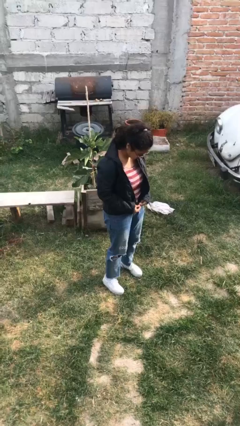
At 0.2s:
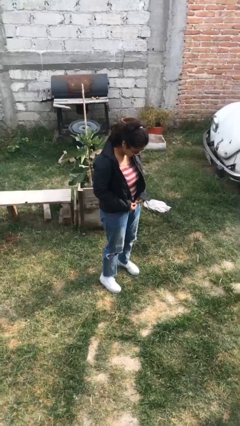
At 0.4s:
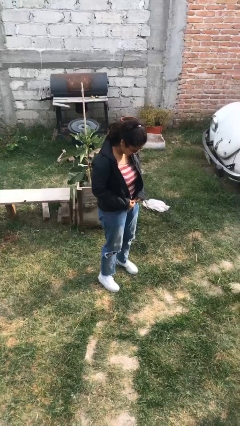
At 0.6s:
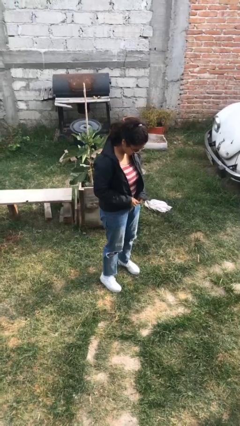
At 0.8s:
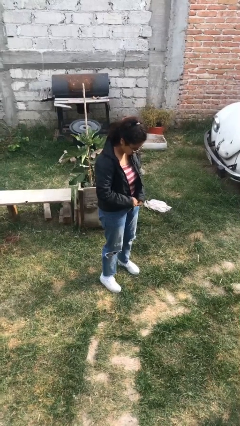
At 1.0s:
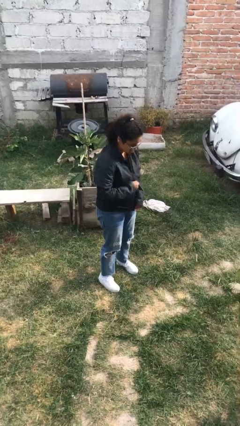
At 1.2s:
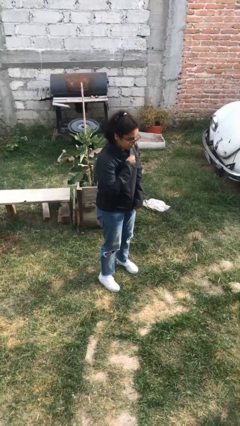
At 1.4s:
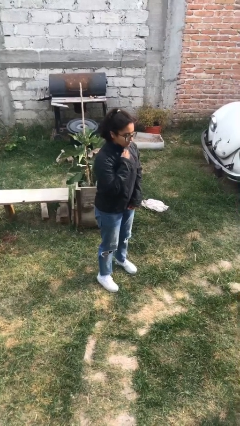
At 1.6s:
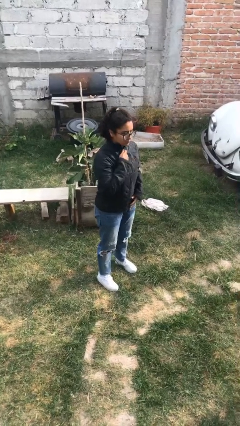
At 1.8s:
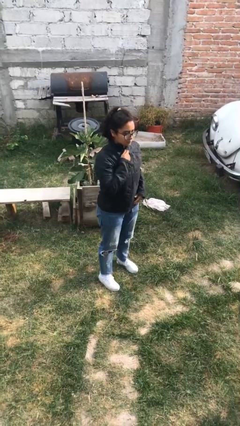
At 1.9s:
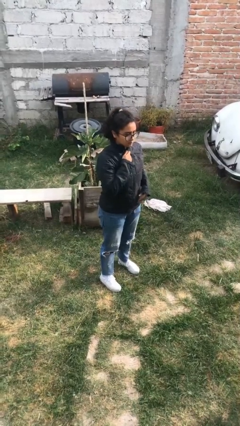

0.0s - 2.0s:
person zips up jacket

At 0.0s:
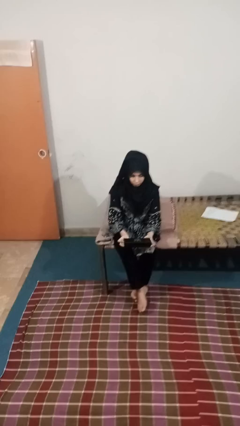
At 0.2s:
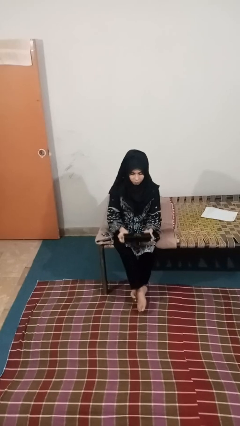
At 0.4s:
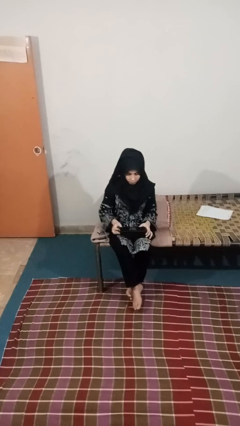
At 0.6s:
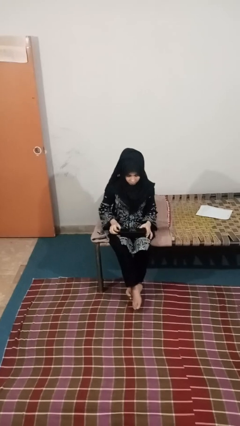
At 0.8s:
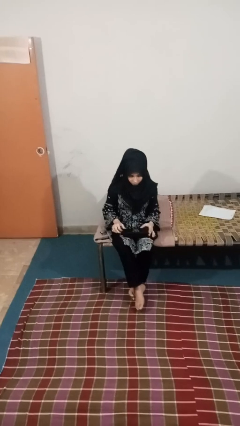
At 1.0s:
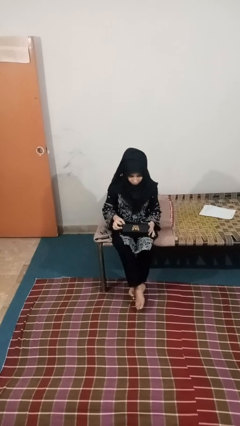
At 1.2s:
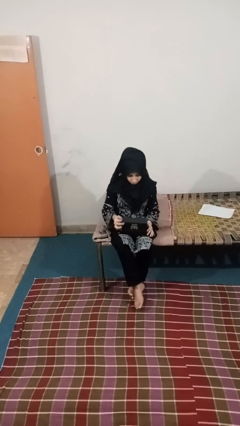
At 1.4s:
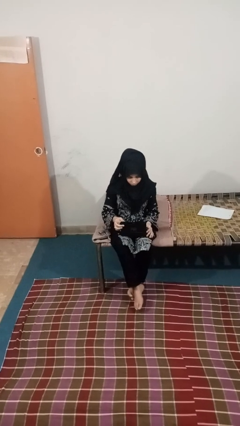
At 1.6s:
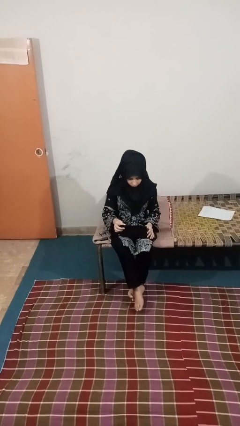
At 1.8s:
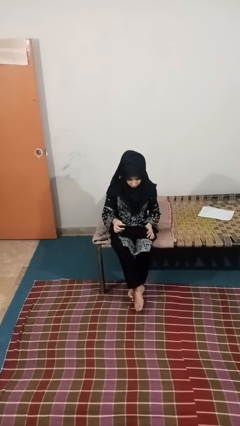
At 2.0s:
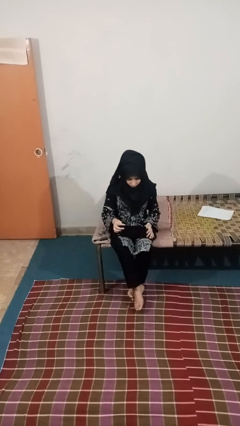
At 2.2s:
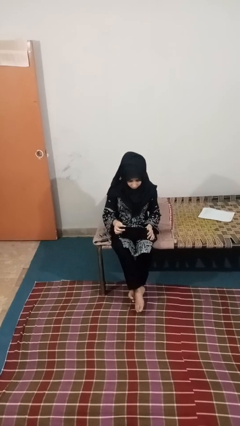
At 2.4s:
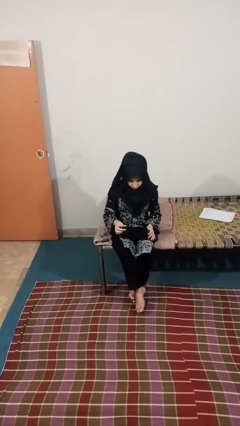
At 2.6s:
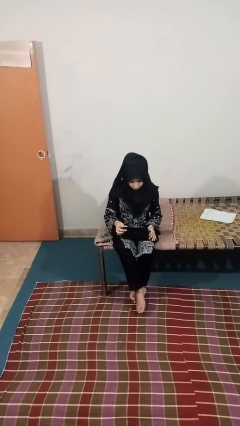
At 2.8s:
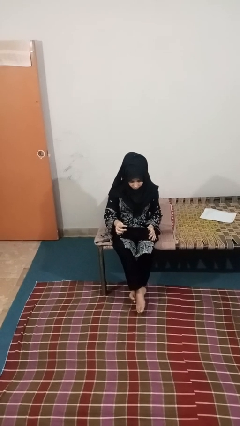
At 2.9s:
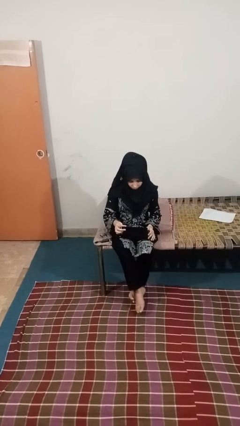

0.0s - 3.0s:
person opens jewelry box

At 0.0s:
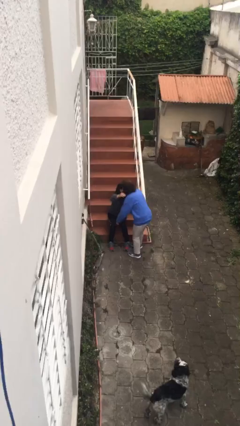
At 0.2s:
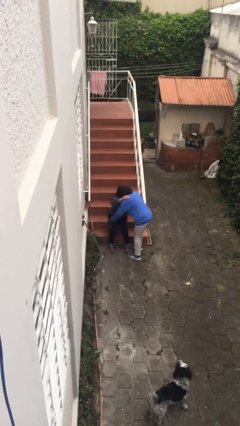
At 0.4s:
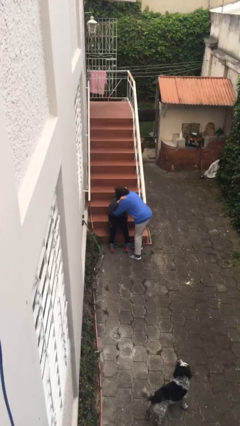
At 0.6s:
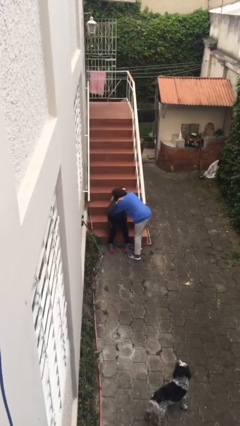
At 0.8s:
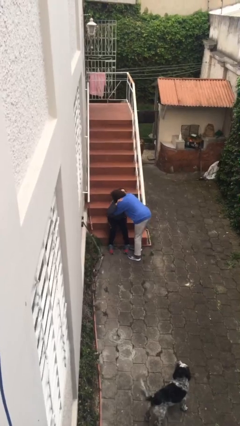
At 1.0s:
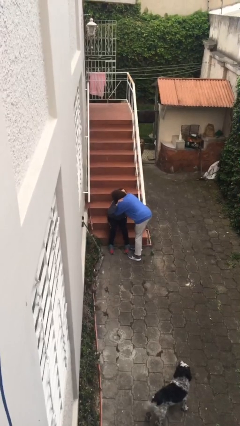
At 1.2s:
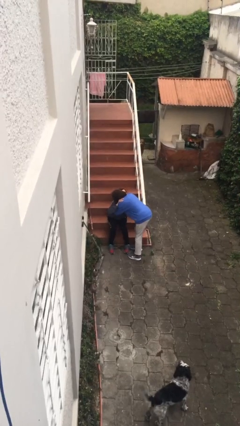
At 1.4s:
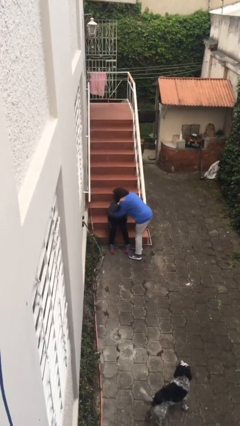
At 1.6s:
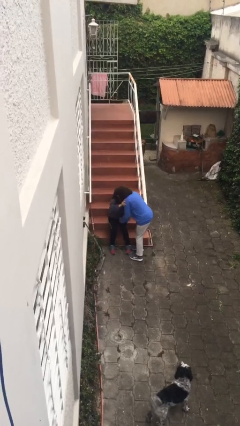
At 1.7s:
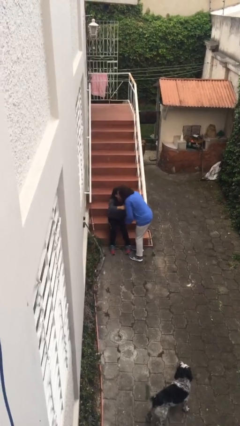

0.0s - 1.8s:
person embraces person

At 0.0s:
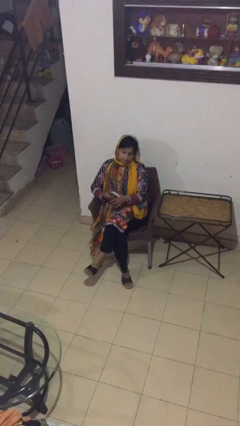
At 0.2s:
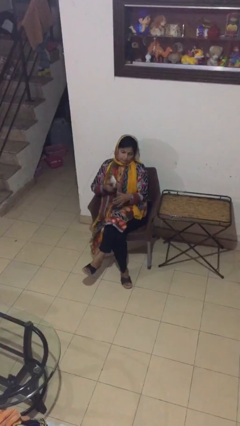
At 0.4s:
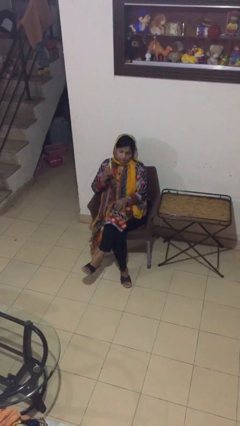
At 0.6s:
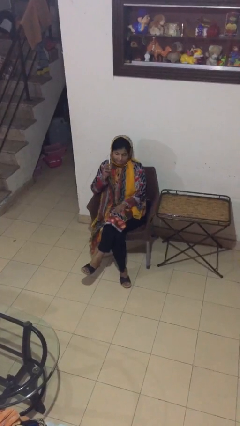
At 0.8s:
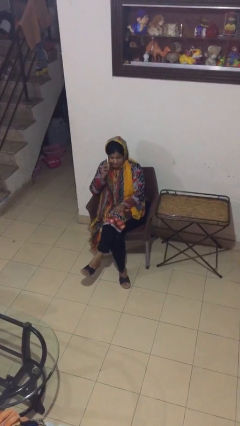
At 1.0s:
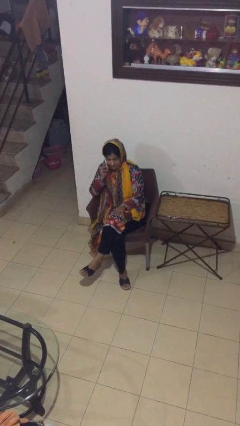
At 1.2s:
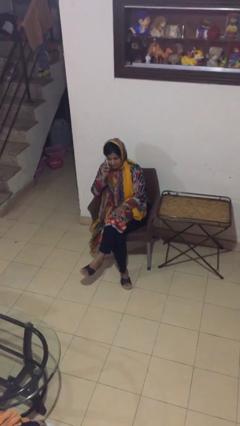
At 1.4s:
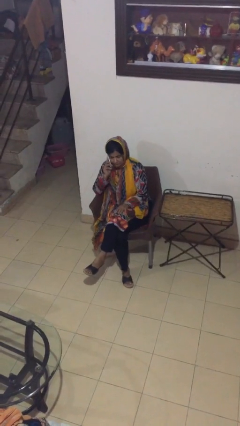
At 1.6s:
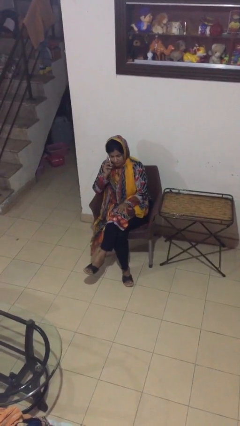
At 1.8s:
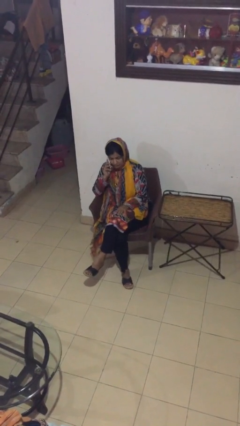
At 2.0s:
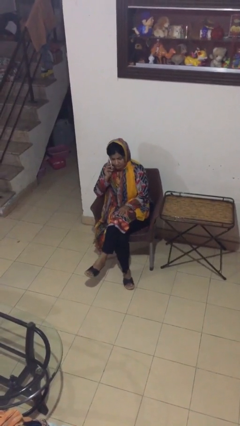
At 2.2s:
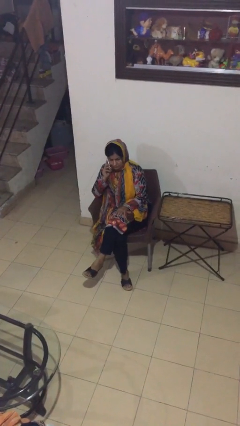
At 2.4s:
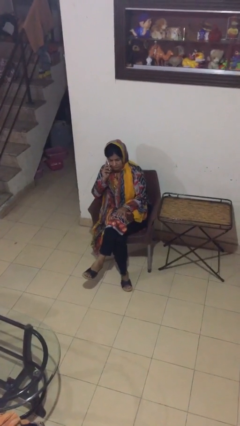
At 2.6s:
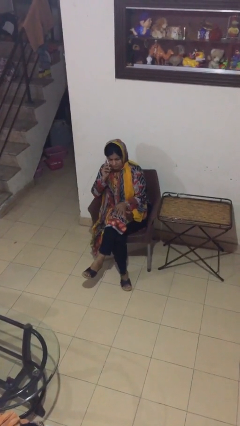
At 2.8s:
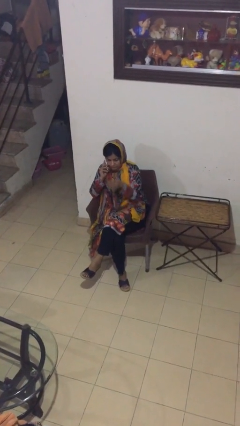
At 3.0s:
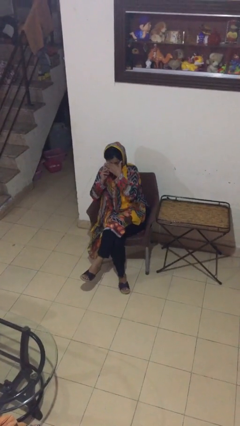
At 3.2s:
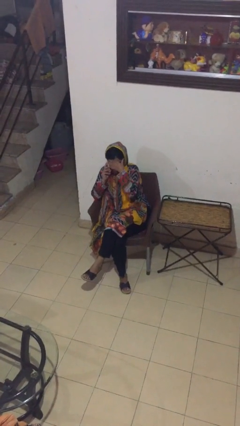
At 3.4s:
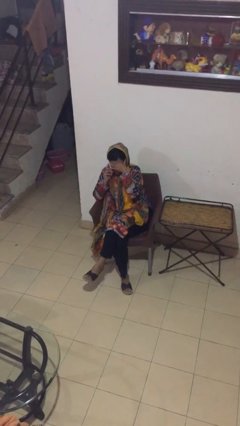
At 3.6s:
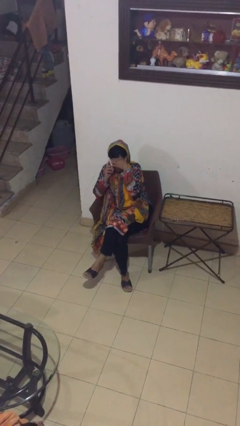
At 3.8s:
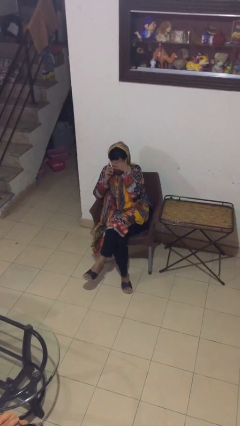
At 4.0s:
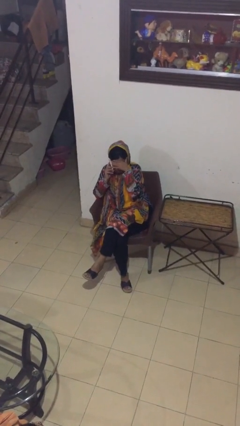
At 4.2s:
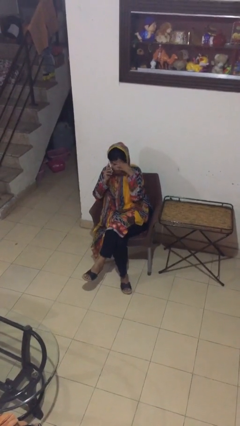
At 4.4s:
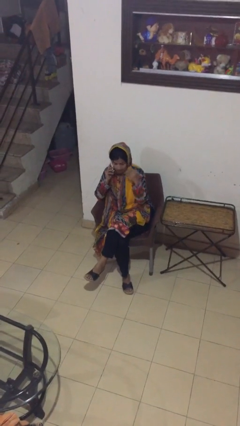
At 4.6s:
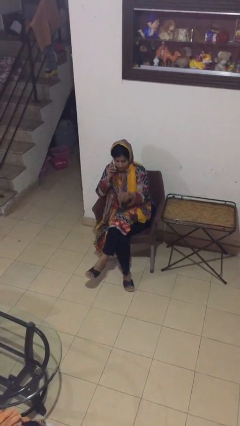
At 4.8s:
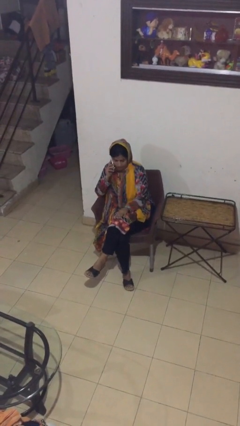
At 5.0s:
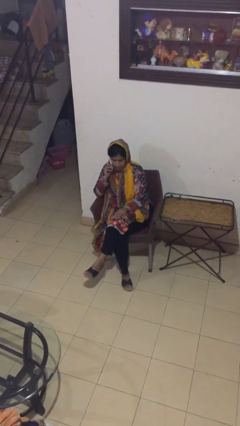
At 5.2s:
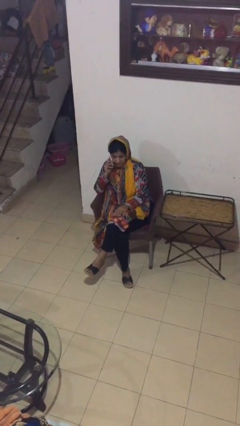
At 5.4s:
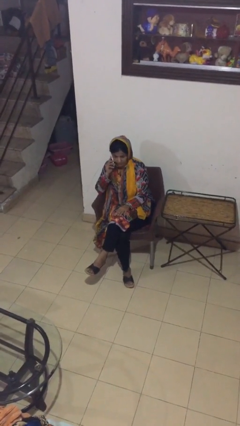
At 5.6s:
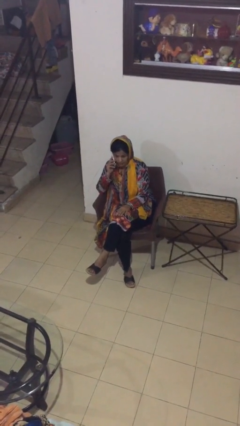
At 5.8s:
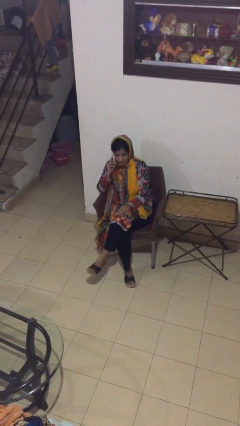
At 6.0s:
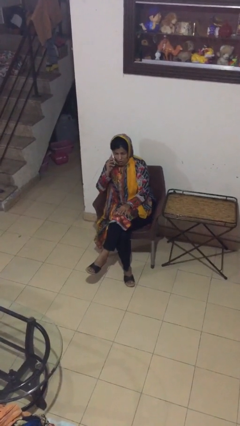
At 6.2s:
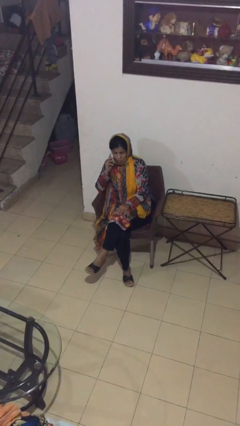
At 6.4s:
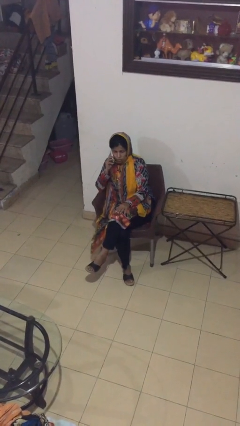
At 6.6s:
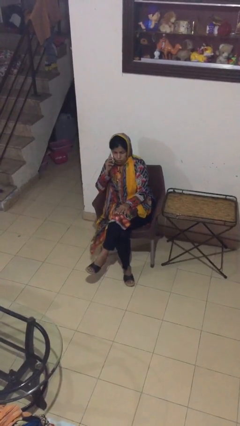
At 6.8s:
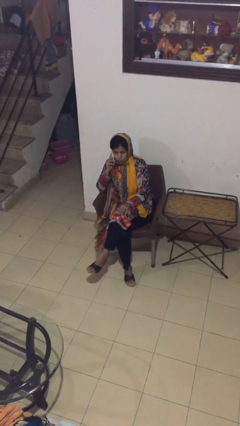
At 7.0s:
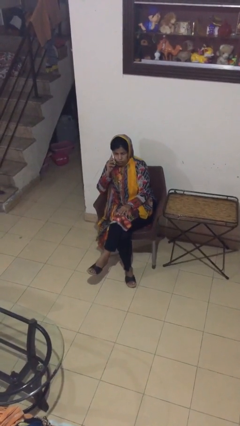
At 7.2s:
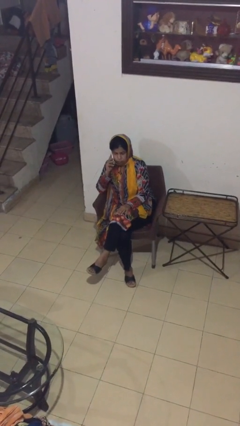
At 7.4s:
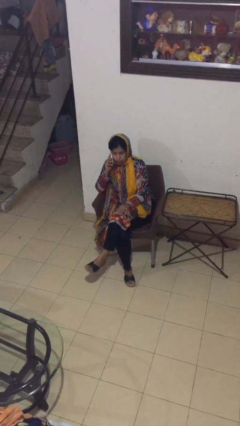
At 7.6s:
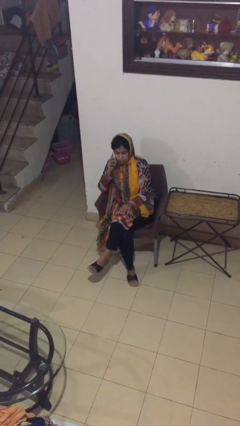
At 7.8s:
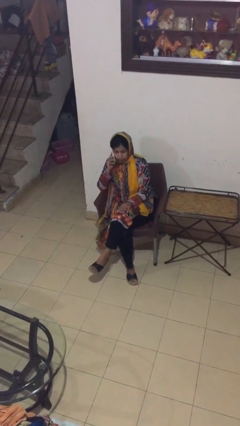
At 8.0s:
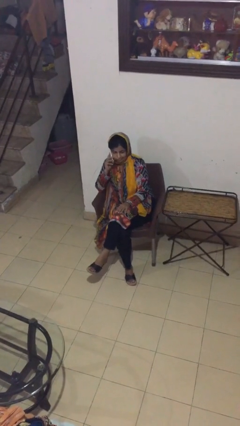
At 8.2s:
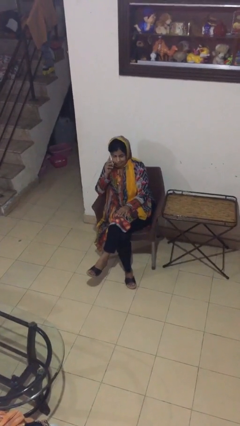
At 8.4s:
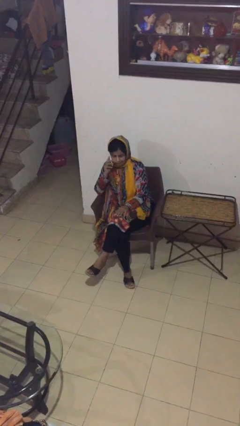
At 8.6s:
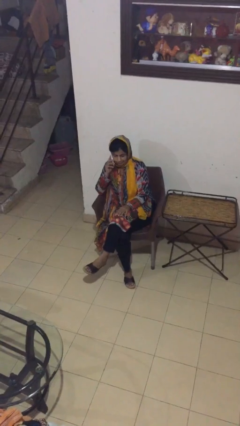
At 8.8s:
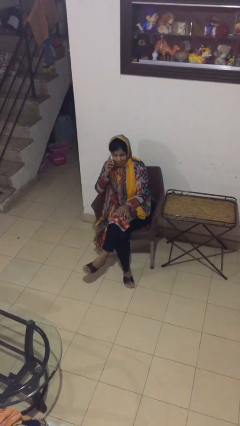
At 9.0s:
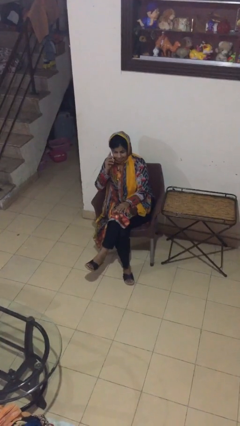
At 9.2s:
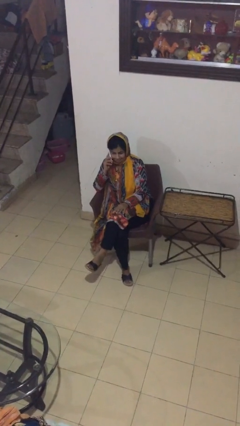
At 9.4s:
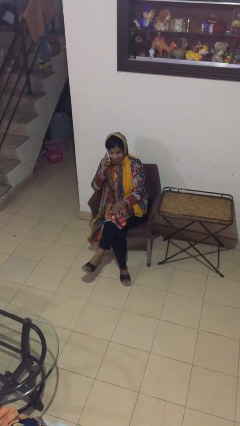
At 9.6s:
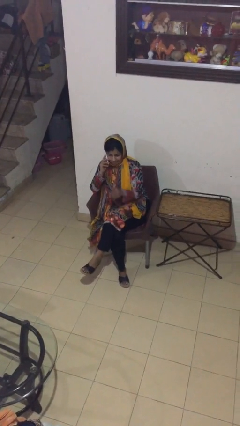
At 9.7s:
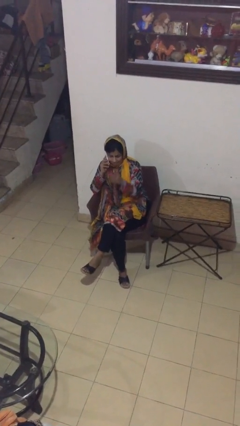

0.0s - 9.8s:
person talks on phone

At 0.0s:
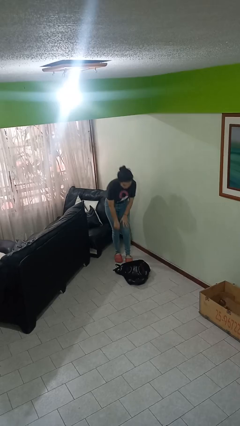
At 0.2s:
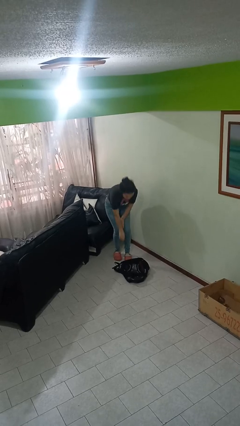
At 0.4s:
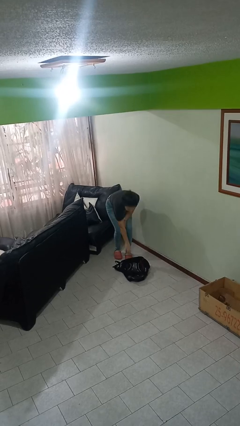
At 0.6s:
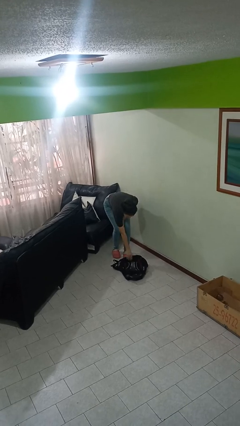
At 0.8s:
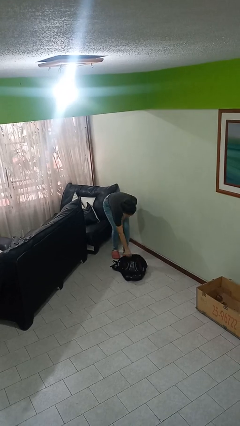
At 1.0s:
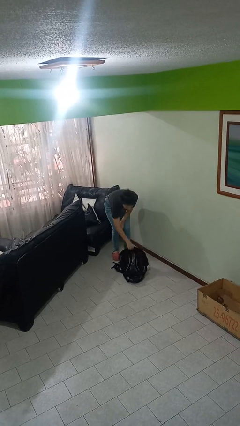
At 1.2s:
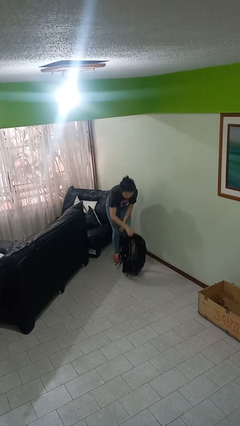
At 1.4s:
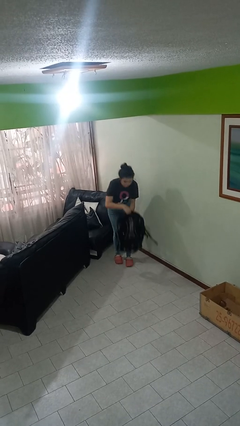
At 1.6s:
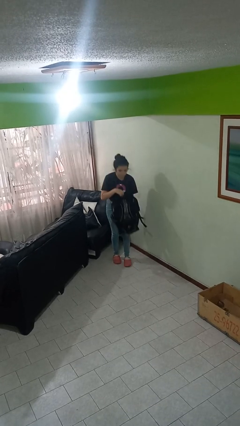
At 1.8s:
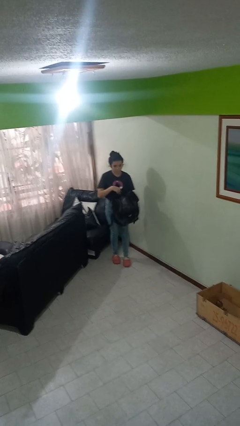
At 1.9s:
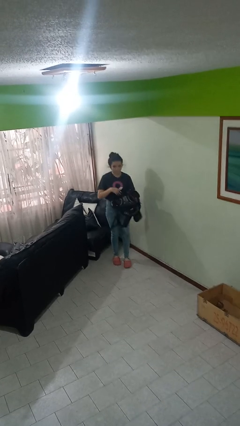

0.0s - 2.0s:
person picks up object from floor
